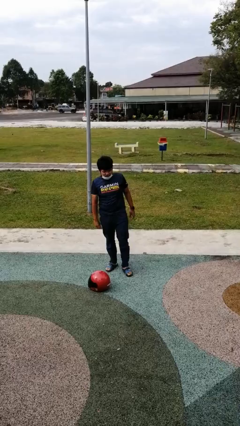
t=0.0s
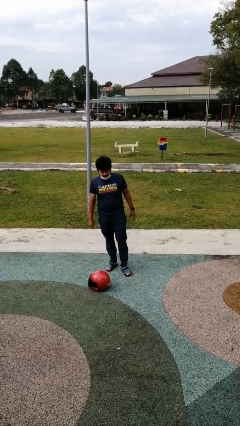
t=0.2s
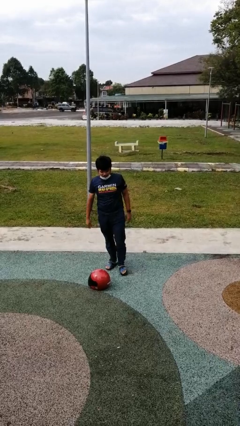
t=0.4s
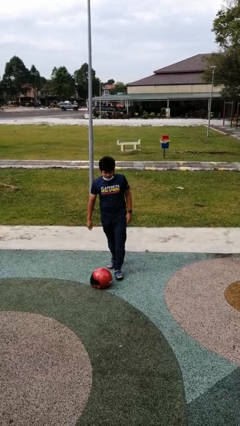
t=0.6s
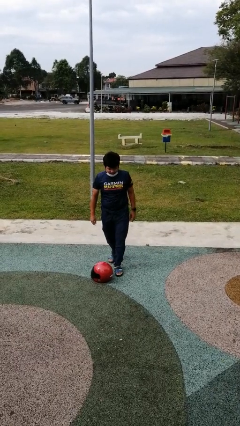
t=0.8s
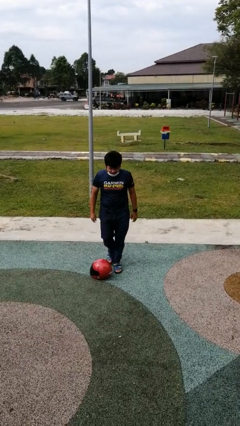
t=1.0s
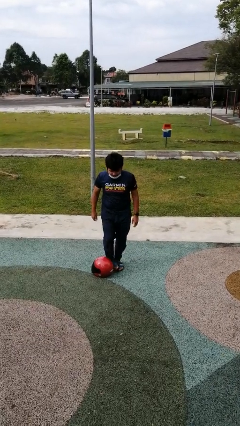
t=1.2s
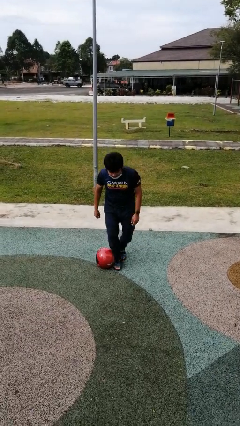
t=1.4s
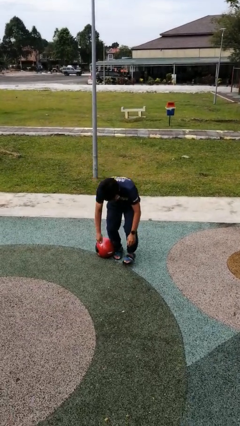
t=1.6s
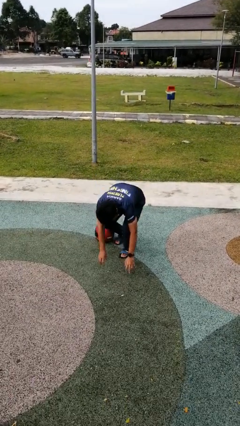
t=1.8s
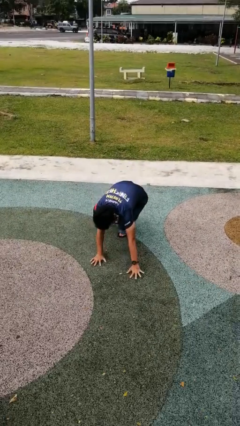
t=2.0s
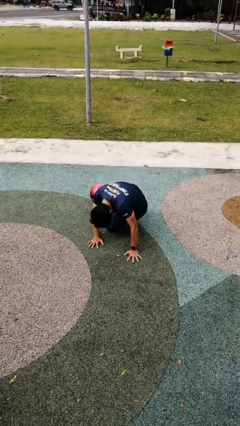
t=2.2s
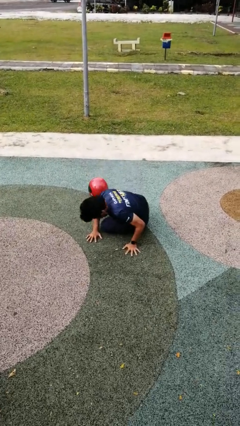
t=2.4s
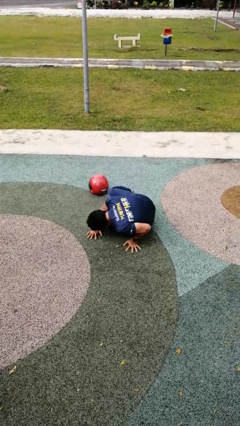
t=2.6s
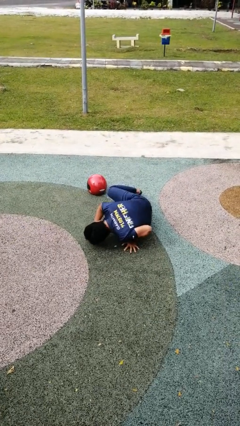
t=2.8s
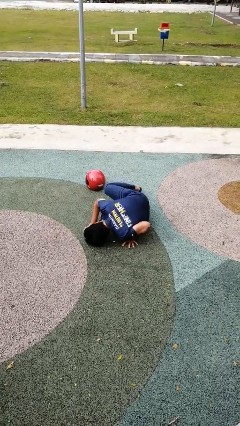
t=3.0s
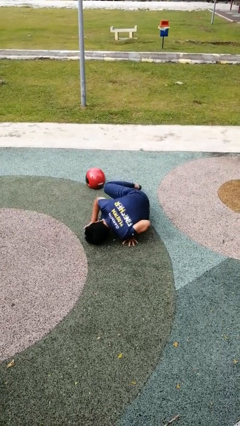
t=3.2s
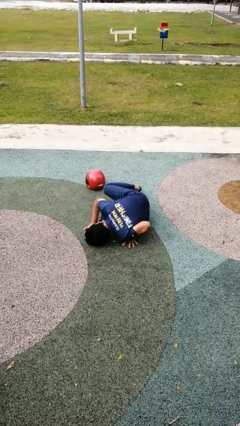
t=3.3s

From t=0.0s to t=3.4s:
person trips on object on floor

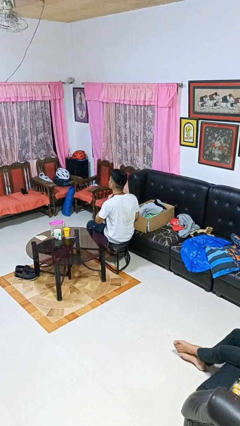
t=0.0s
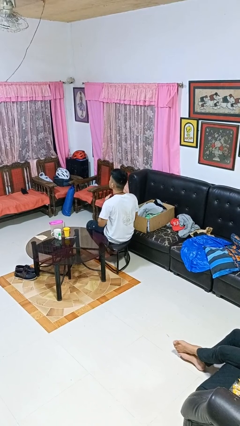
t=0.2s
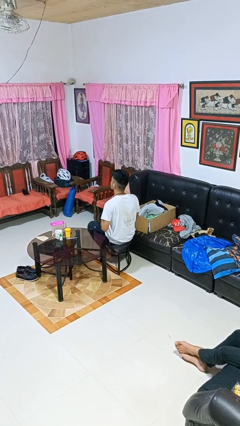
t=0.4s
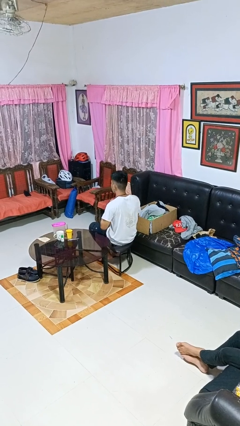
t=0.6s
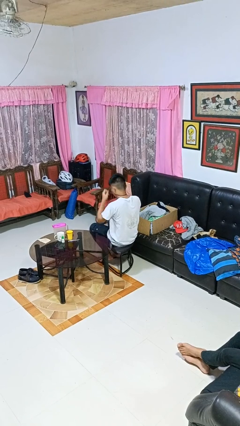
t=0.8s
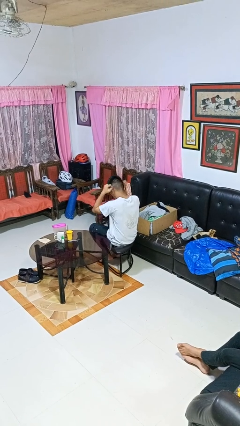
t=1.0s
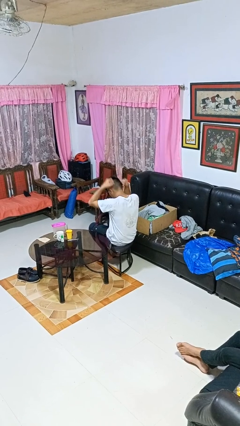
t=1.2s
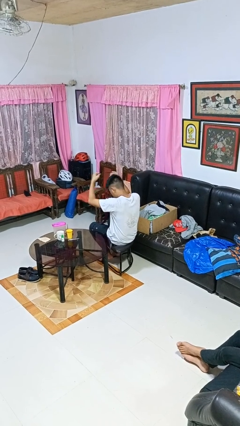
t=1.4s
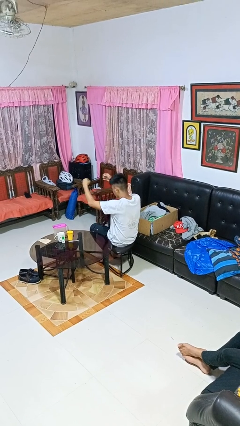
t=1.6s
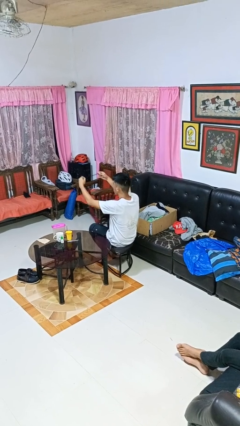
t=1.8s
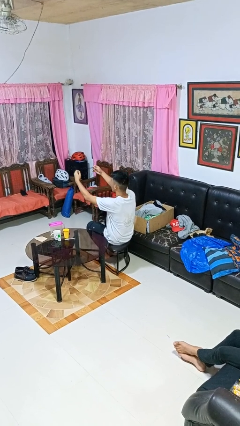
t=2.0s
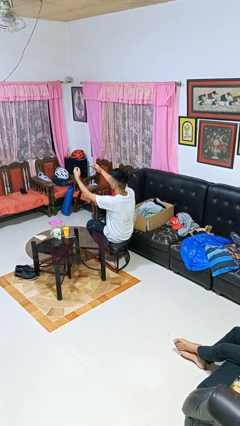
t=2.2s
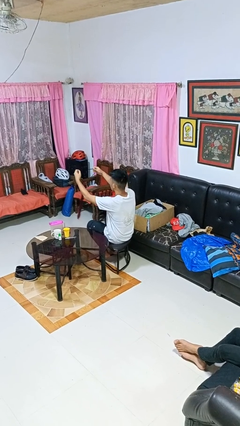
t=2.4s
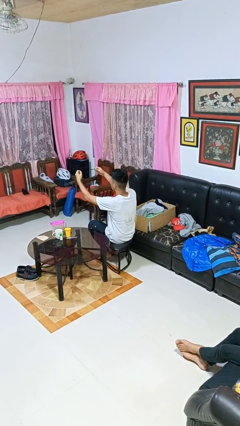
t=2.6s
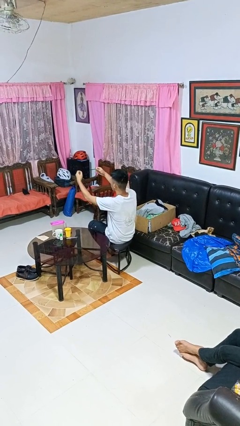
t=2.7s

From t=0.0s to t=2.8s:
person takes off necktie

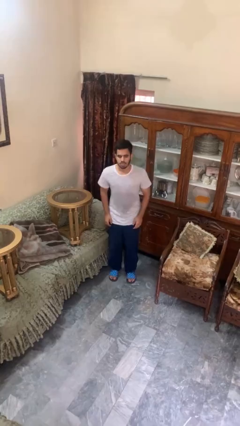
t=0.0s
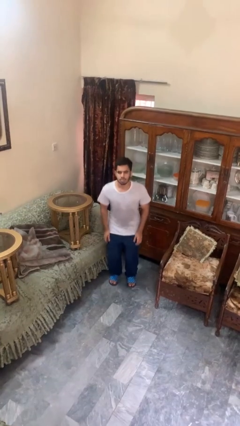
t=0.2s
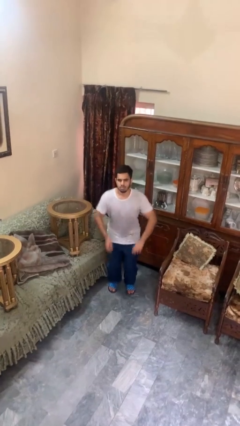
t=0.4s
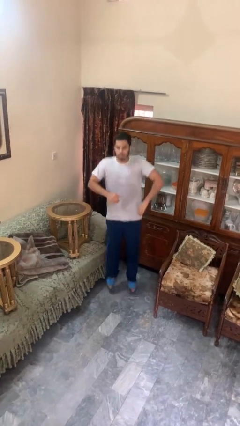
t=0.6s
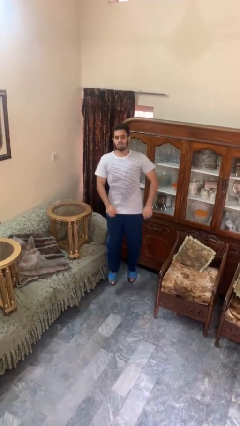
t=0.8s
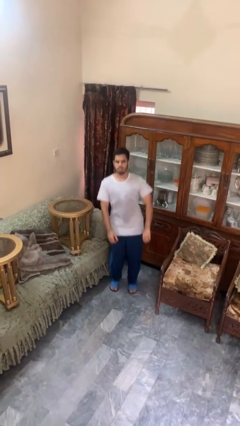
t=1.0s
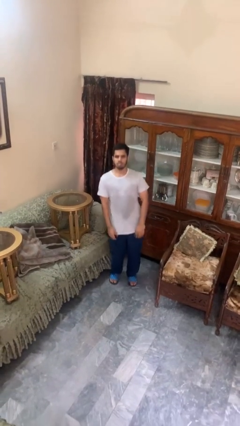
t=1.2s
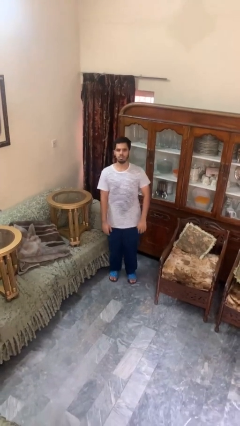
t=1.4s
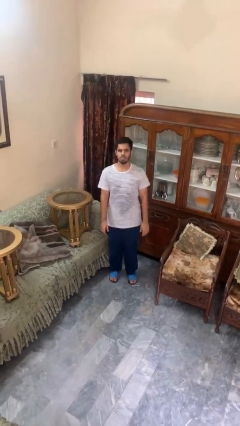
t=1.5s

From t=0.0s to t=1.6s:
person jumps

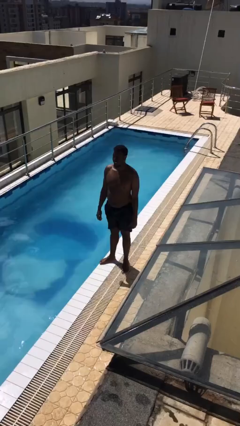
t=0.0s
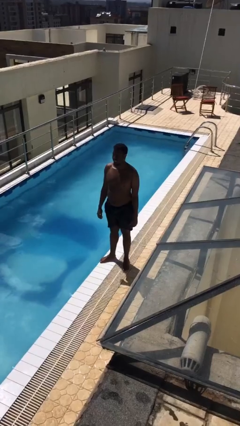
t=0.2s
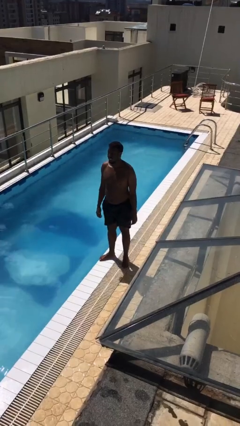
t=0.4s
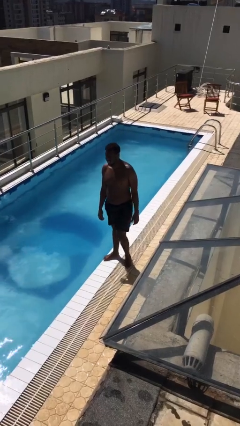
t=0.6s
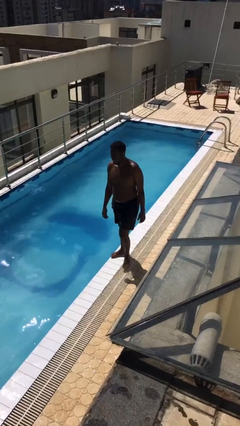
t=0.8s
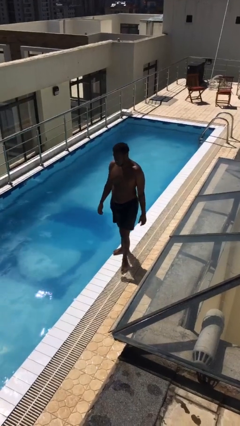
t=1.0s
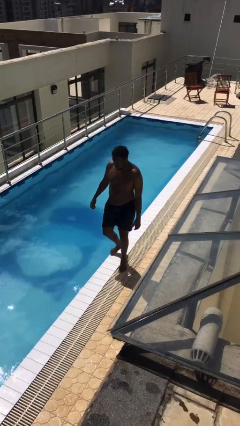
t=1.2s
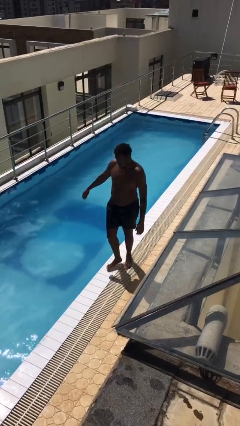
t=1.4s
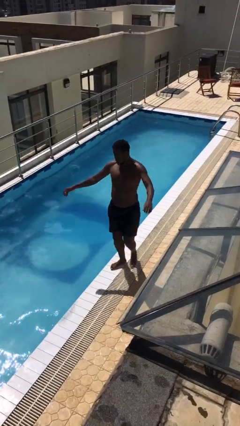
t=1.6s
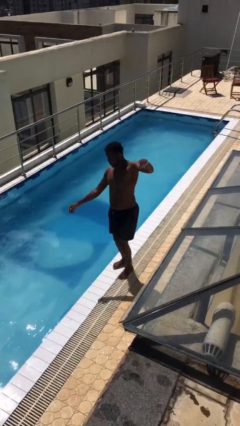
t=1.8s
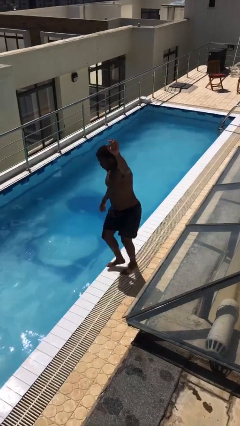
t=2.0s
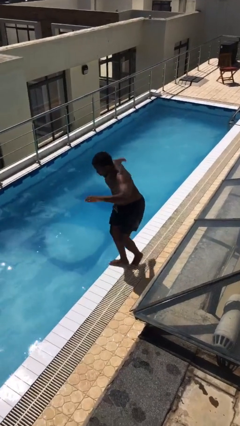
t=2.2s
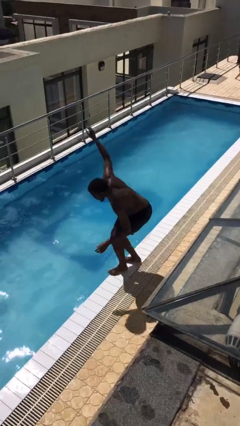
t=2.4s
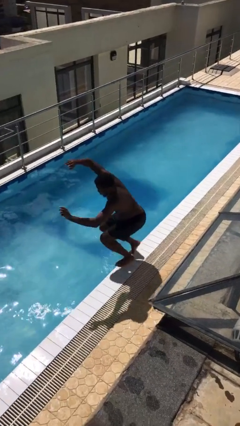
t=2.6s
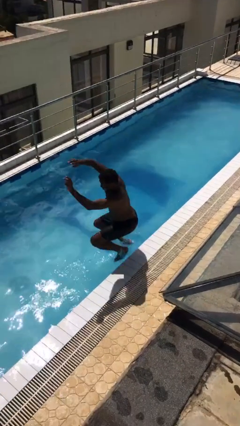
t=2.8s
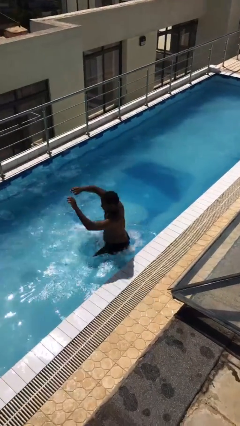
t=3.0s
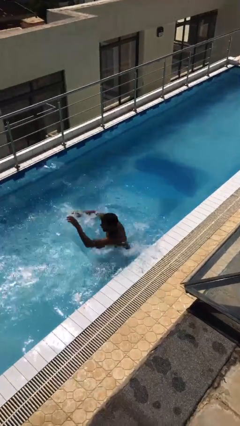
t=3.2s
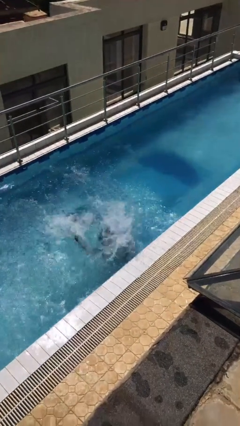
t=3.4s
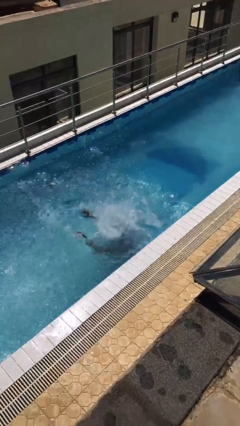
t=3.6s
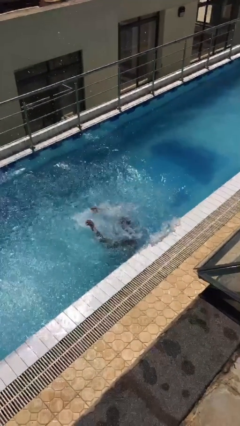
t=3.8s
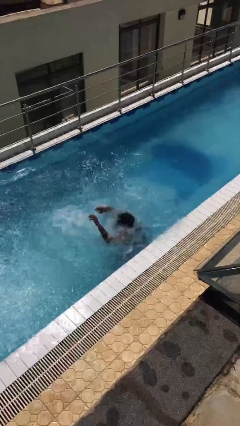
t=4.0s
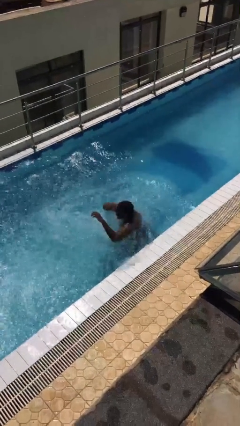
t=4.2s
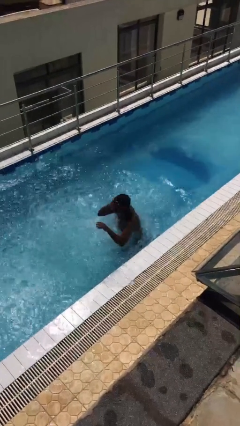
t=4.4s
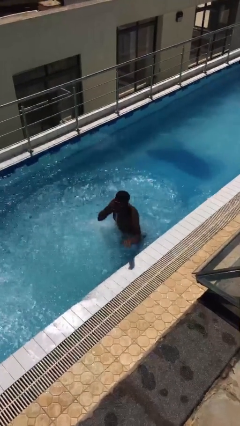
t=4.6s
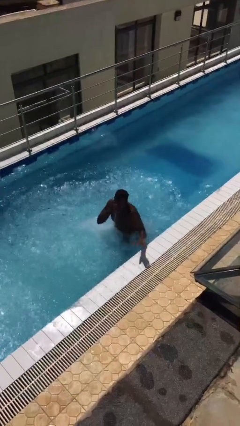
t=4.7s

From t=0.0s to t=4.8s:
person falls into pool

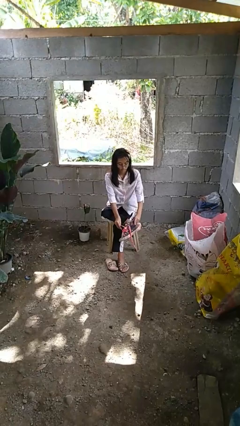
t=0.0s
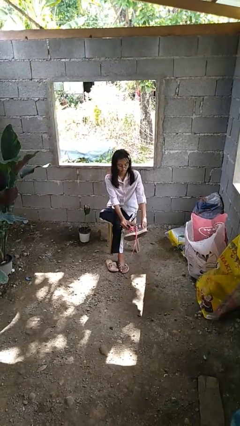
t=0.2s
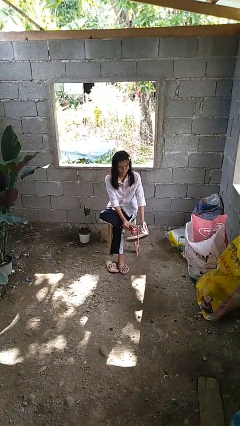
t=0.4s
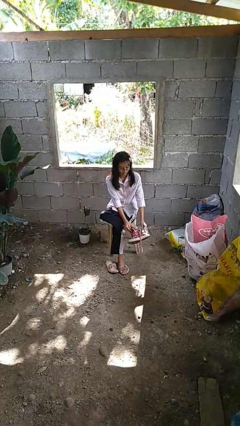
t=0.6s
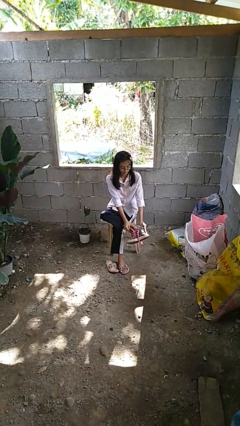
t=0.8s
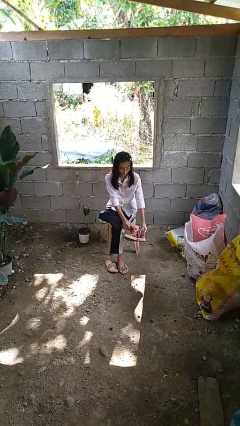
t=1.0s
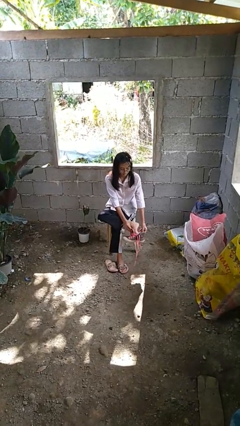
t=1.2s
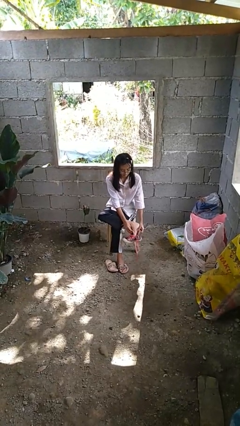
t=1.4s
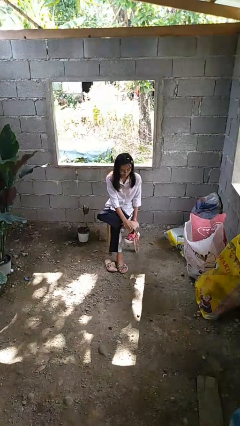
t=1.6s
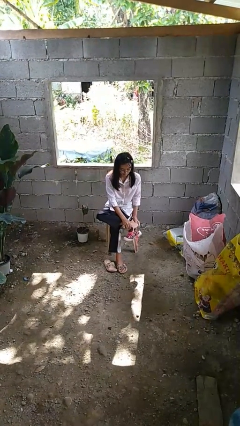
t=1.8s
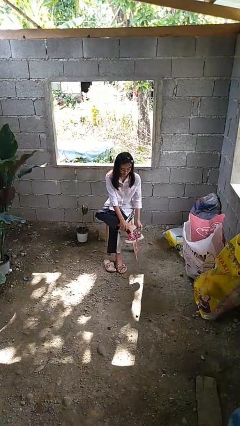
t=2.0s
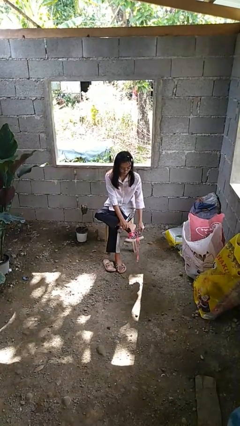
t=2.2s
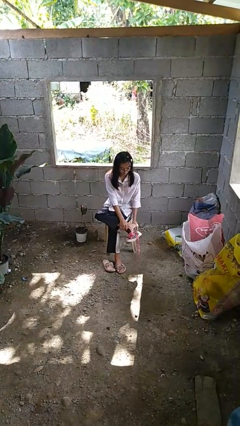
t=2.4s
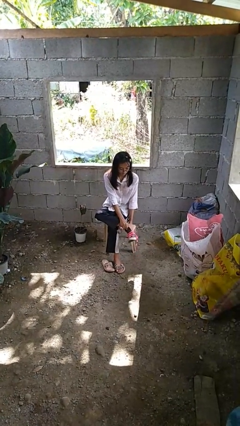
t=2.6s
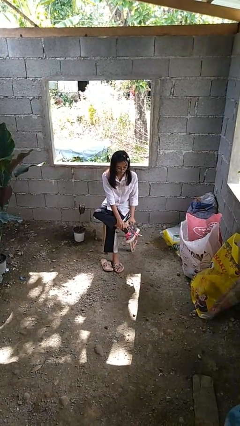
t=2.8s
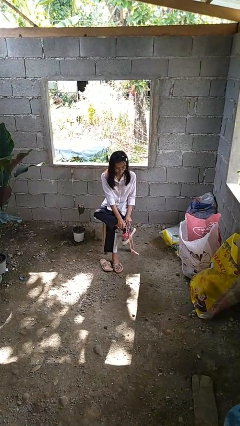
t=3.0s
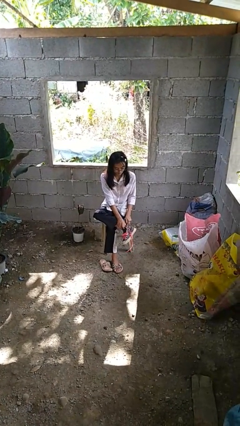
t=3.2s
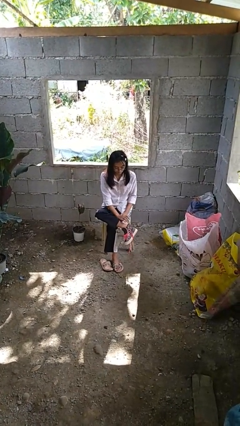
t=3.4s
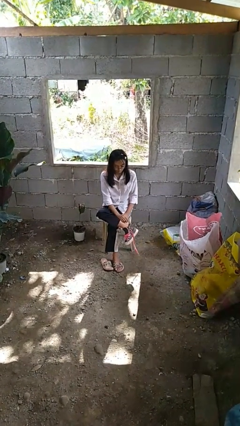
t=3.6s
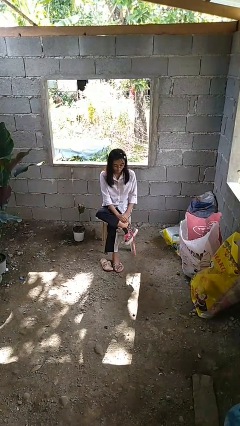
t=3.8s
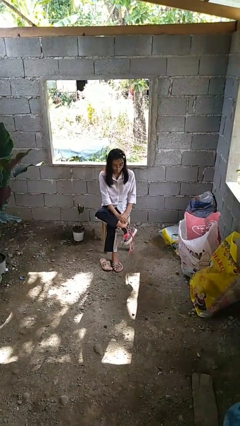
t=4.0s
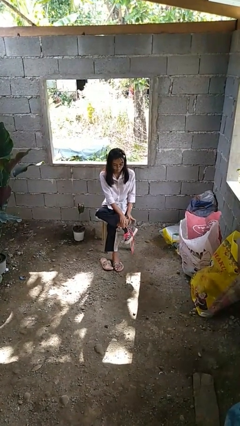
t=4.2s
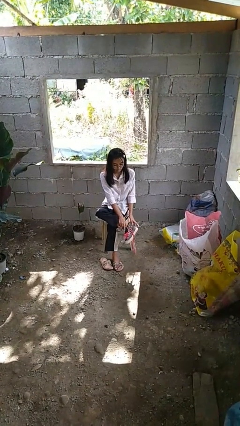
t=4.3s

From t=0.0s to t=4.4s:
person puts on shoes

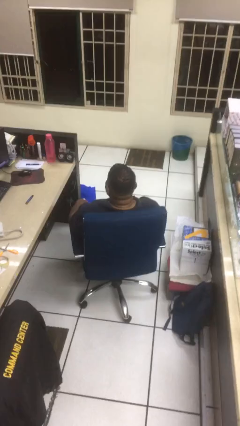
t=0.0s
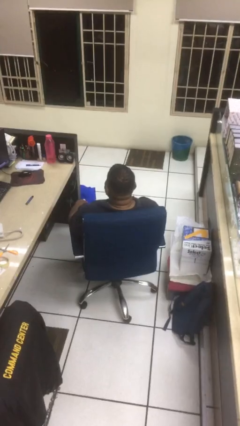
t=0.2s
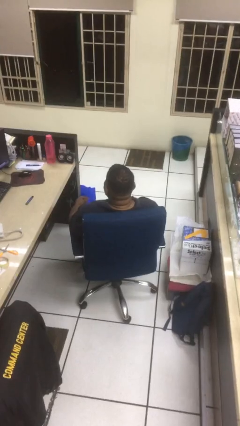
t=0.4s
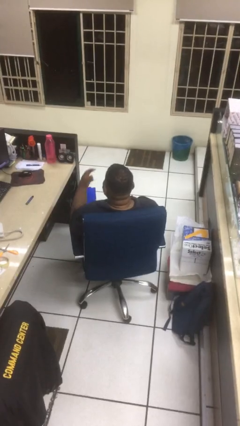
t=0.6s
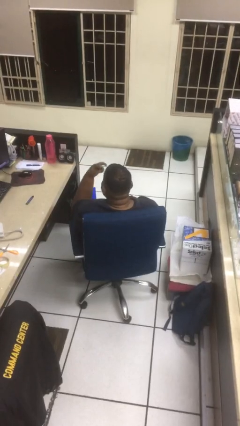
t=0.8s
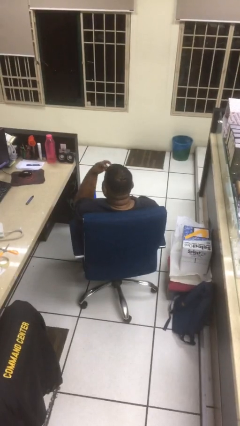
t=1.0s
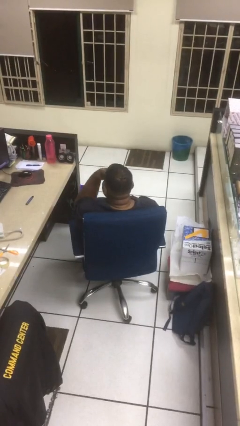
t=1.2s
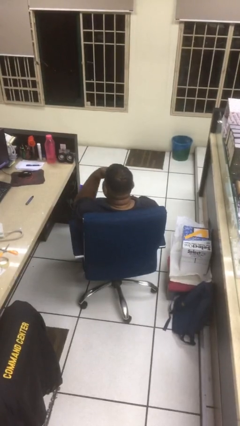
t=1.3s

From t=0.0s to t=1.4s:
person gestures watch closely
